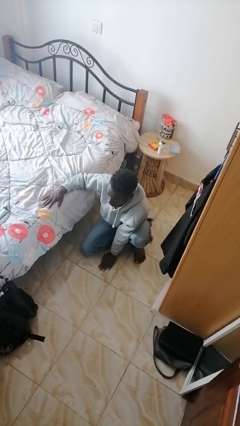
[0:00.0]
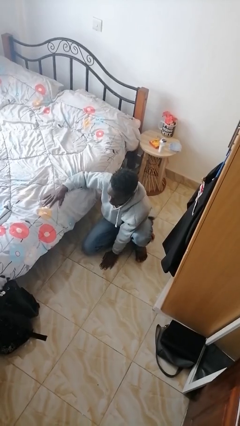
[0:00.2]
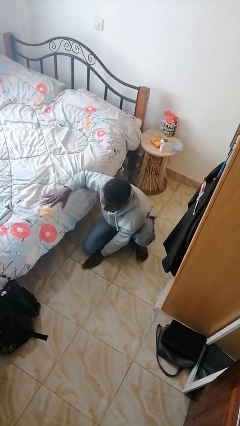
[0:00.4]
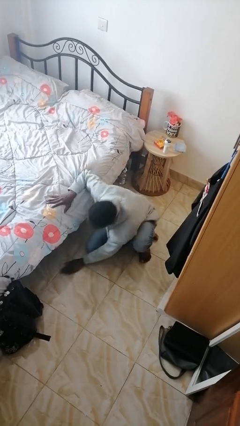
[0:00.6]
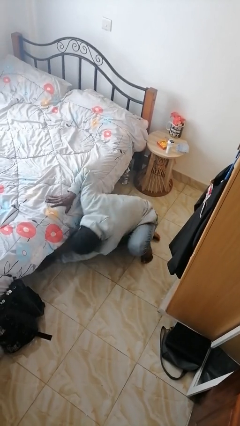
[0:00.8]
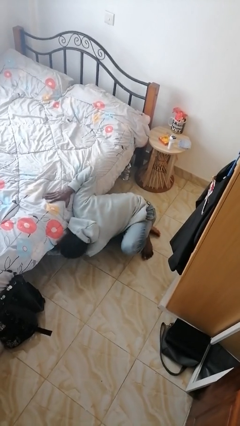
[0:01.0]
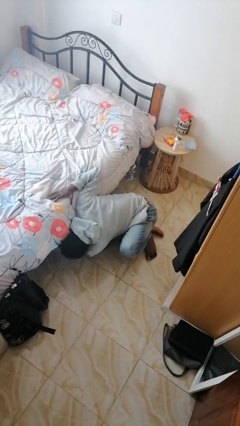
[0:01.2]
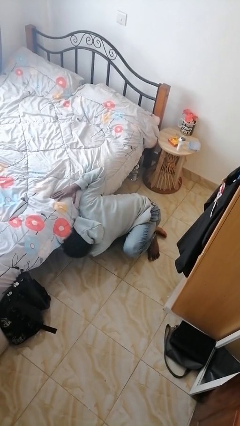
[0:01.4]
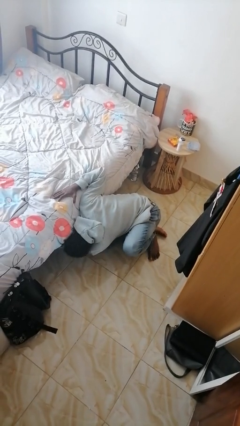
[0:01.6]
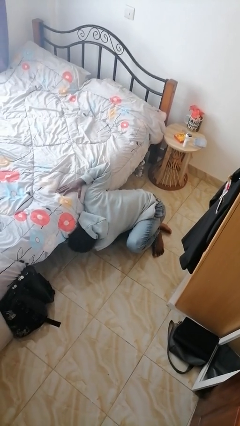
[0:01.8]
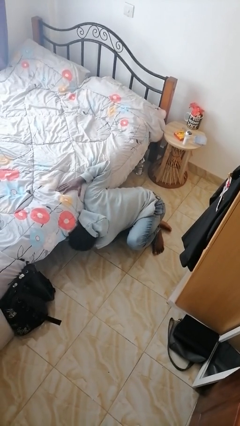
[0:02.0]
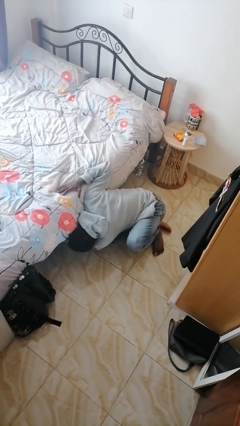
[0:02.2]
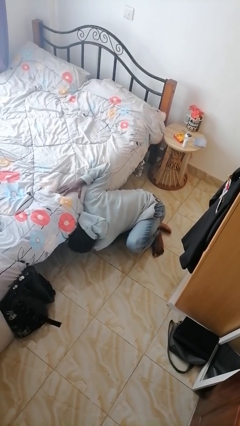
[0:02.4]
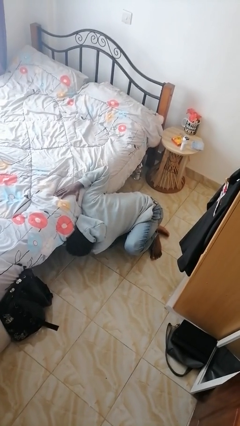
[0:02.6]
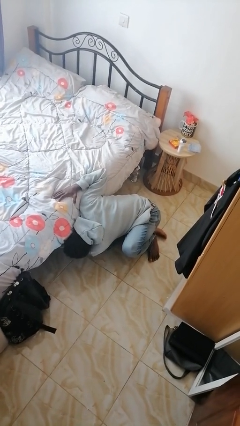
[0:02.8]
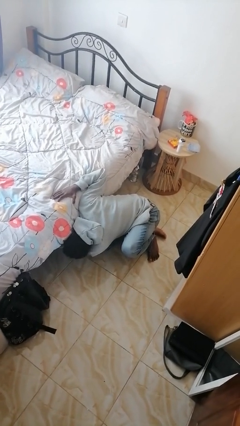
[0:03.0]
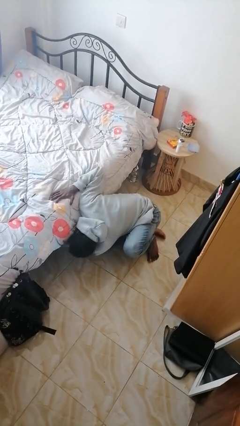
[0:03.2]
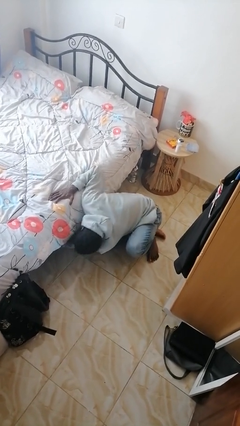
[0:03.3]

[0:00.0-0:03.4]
person searches under bed

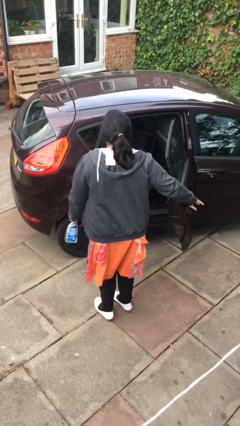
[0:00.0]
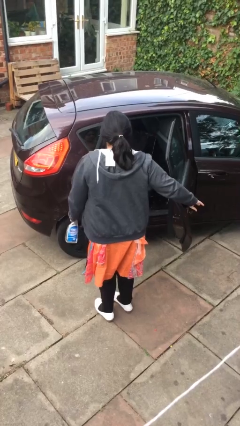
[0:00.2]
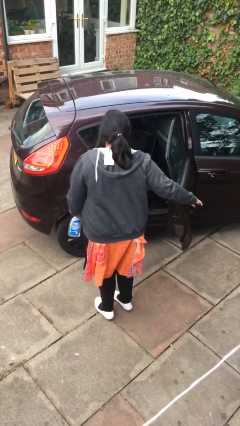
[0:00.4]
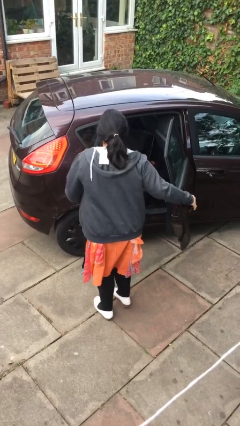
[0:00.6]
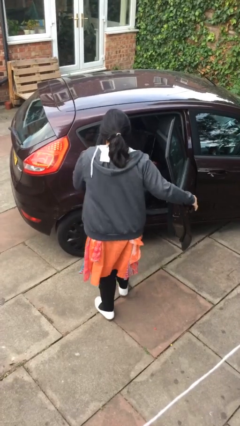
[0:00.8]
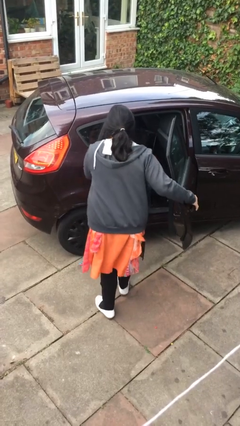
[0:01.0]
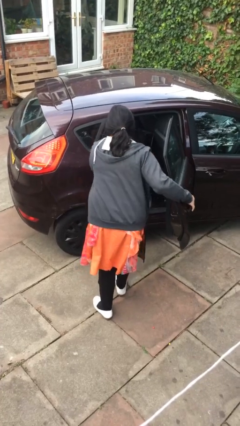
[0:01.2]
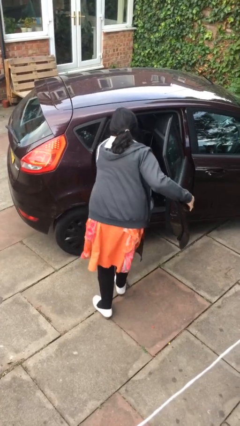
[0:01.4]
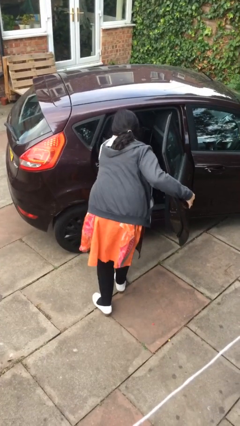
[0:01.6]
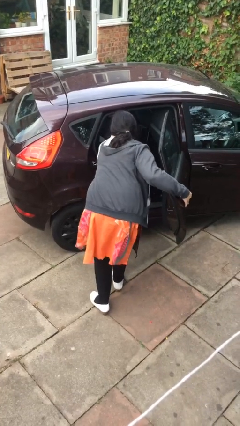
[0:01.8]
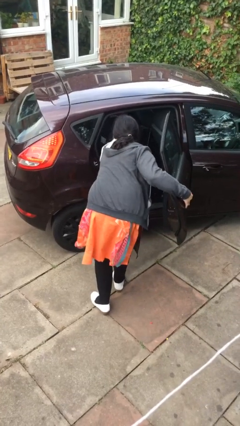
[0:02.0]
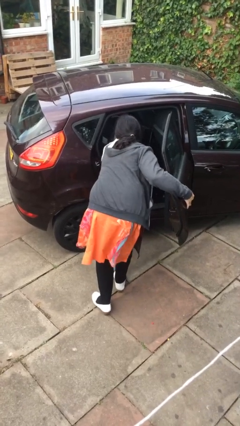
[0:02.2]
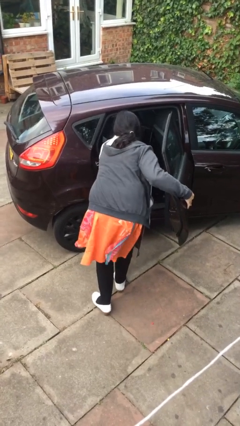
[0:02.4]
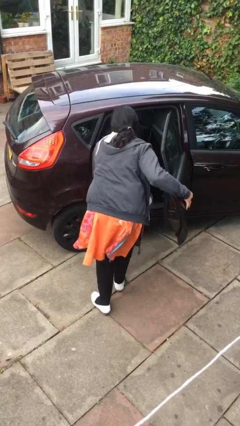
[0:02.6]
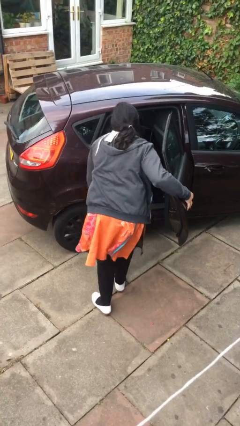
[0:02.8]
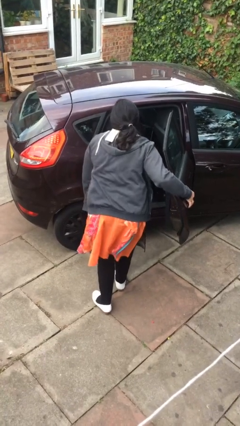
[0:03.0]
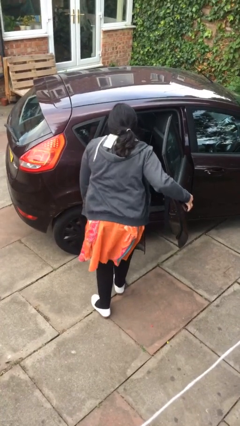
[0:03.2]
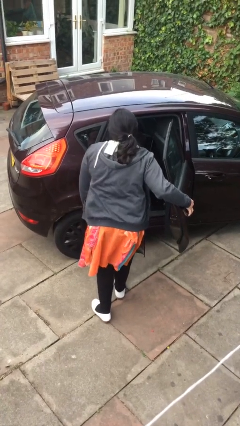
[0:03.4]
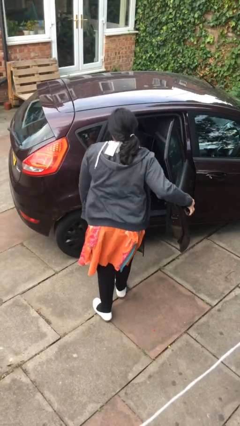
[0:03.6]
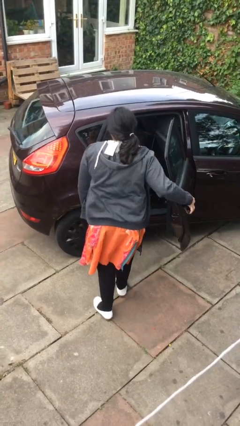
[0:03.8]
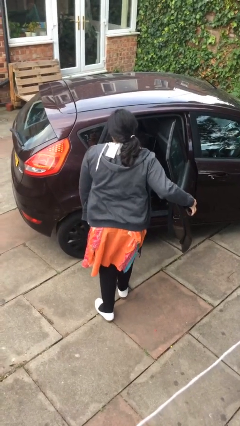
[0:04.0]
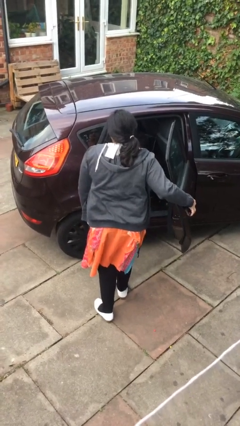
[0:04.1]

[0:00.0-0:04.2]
person loads car

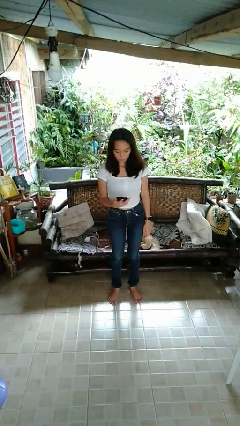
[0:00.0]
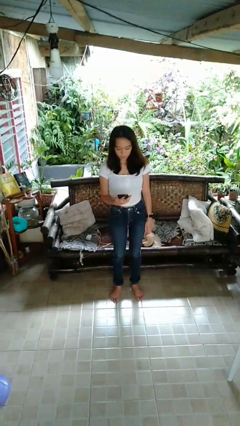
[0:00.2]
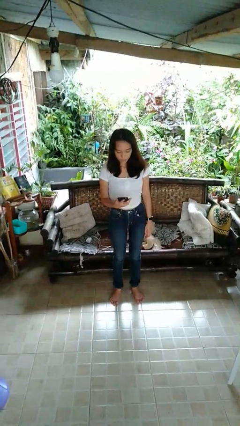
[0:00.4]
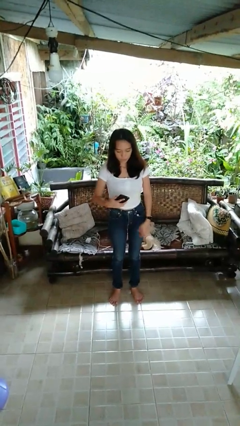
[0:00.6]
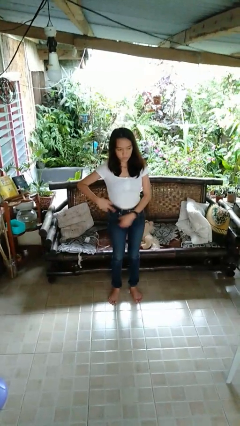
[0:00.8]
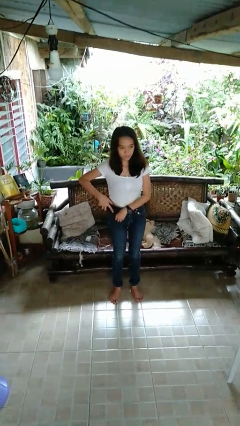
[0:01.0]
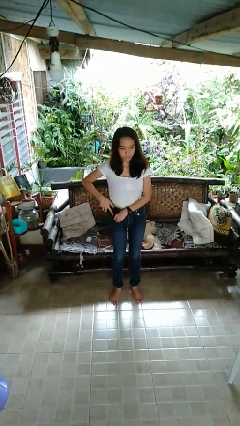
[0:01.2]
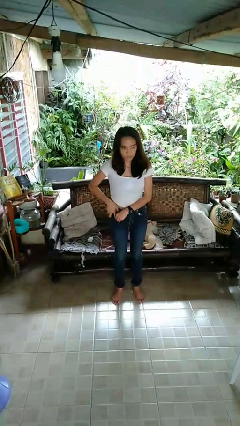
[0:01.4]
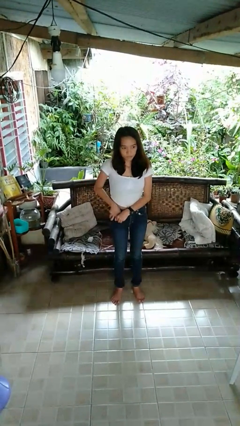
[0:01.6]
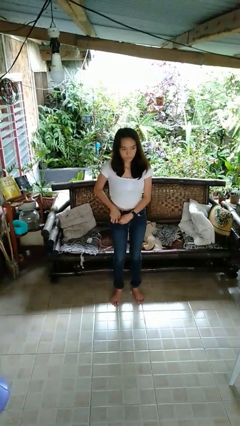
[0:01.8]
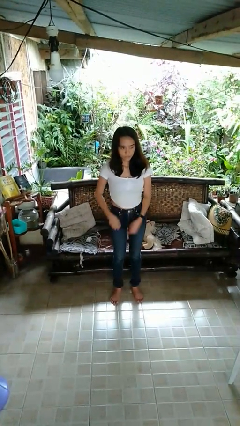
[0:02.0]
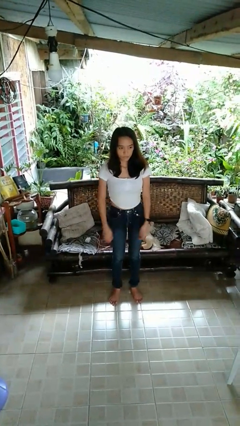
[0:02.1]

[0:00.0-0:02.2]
person puts phone into pocket

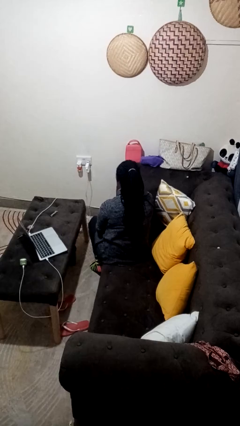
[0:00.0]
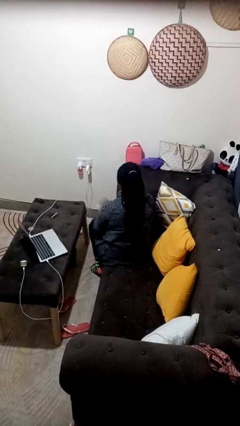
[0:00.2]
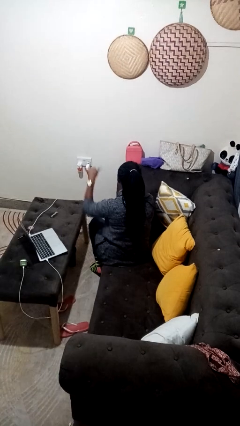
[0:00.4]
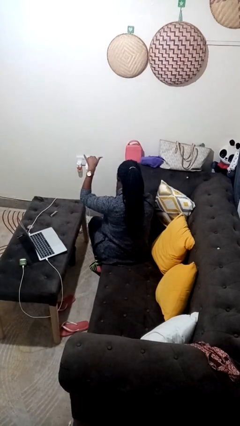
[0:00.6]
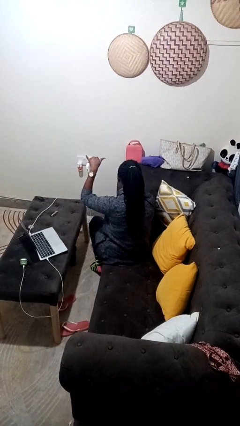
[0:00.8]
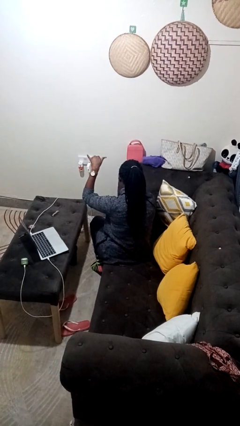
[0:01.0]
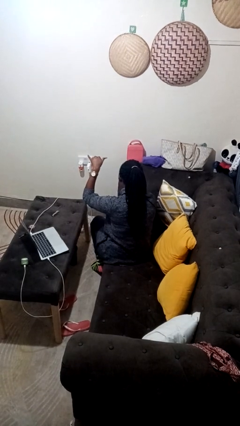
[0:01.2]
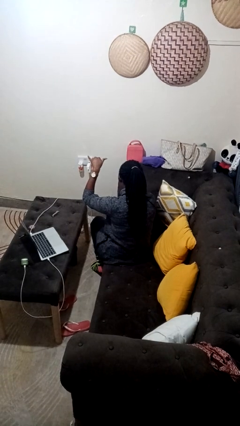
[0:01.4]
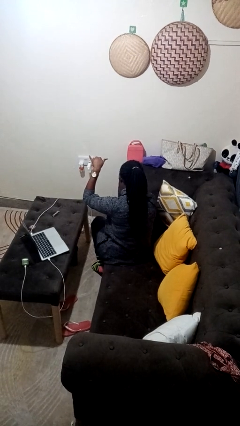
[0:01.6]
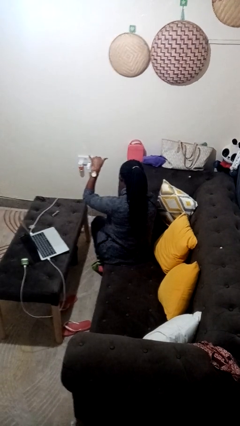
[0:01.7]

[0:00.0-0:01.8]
person gestures hang loose

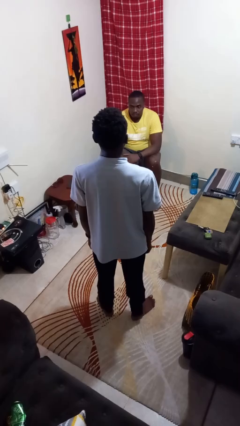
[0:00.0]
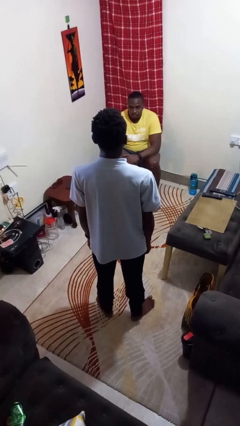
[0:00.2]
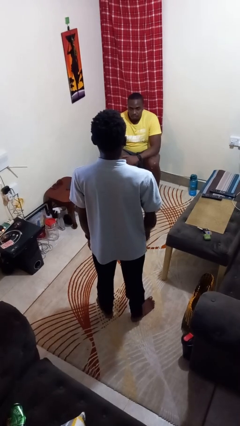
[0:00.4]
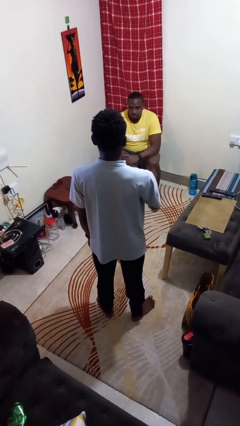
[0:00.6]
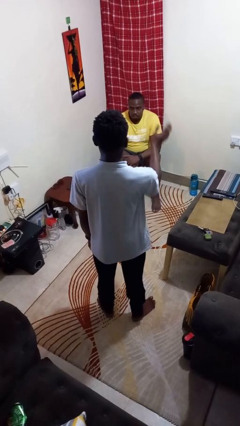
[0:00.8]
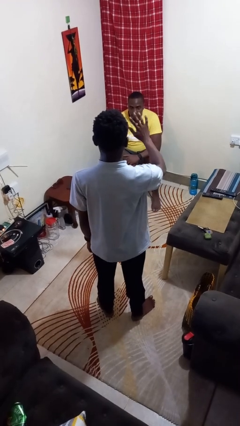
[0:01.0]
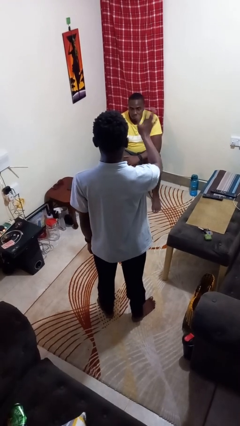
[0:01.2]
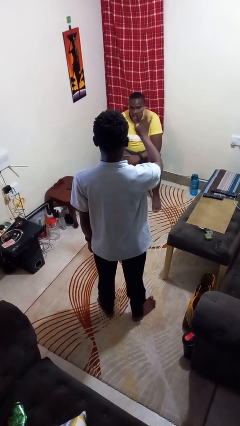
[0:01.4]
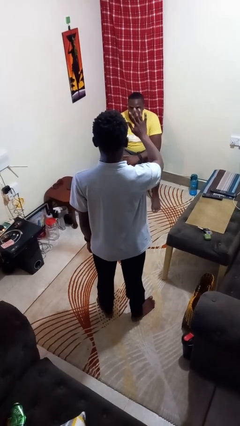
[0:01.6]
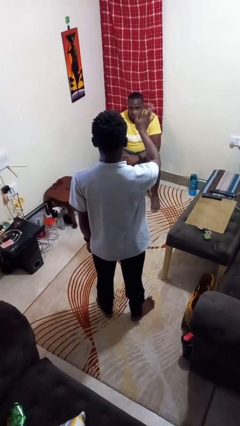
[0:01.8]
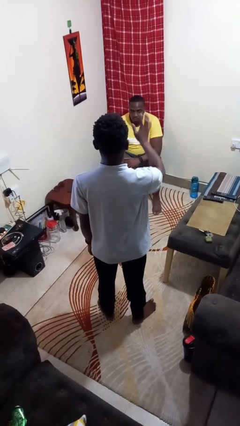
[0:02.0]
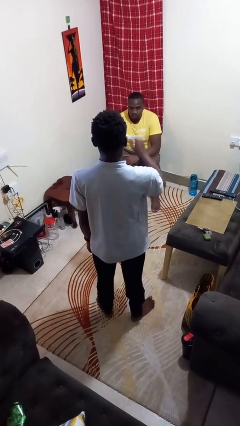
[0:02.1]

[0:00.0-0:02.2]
person waves at person

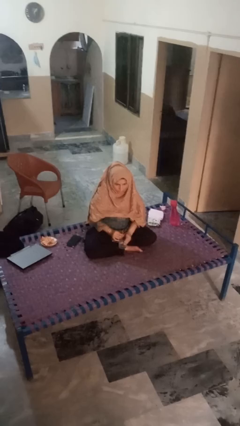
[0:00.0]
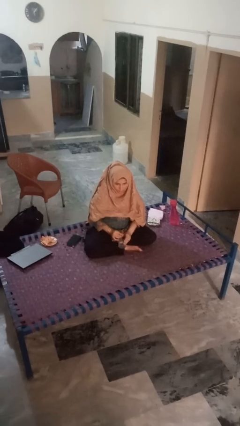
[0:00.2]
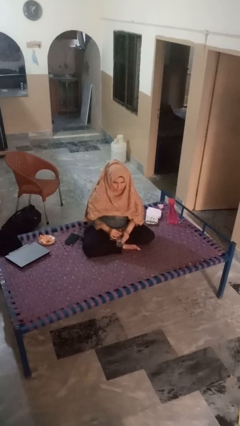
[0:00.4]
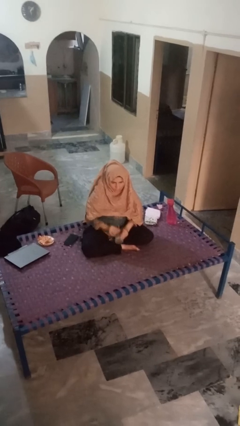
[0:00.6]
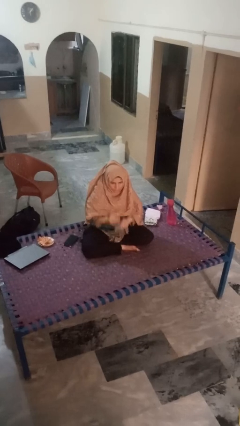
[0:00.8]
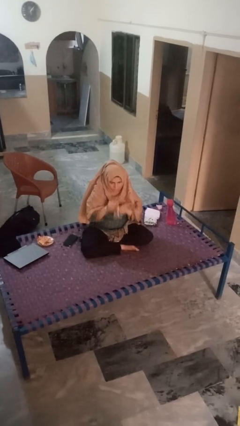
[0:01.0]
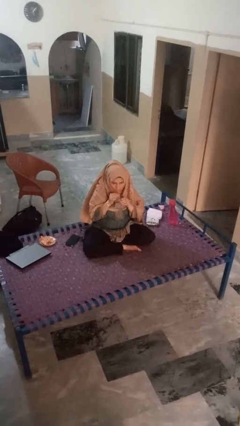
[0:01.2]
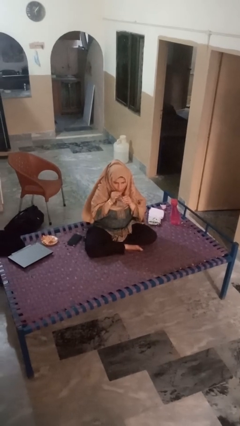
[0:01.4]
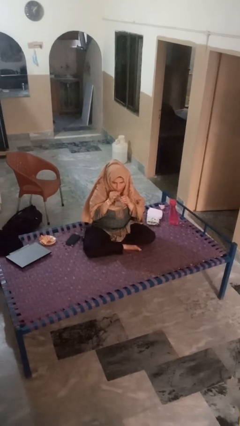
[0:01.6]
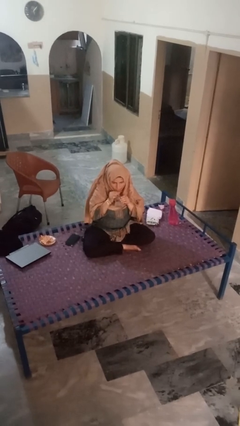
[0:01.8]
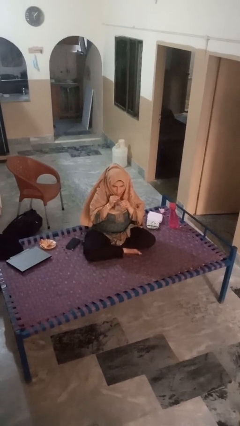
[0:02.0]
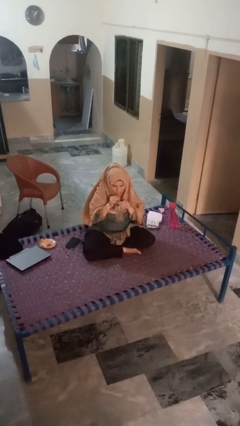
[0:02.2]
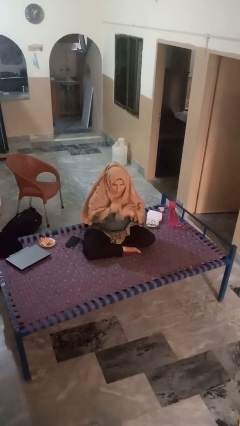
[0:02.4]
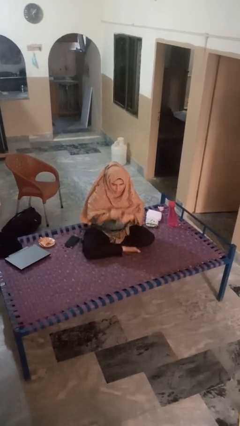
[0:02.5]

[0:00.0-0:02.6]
person drinks from straw

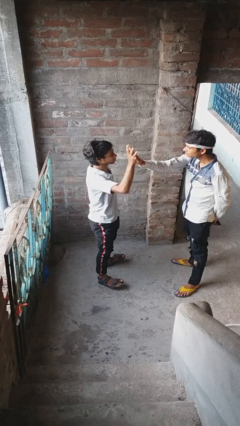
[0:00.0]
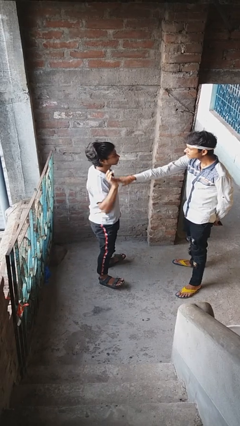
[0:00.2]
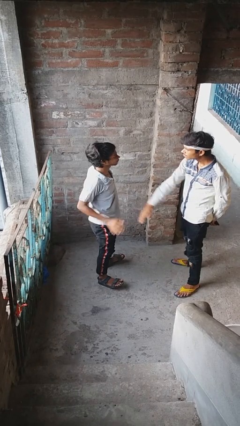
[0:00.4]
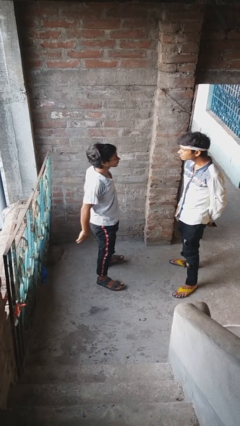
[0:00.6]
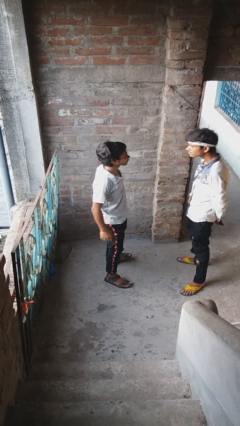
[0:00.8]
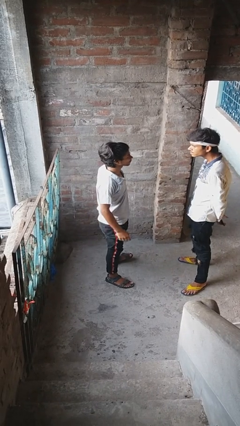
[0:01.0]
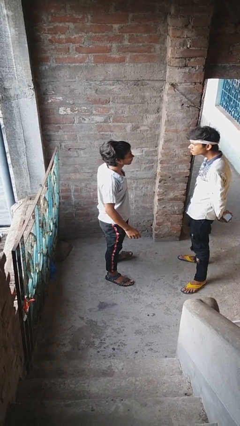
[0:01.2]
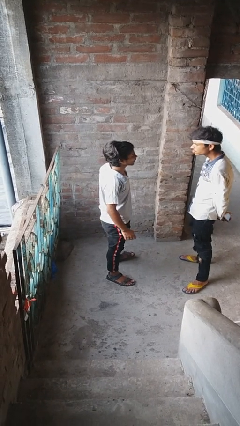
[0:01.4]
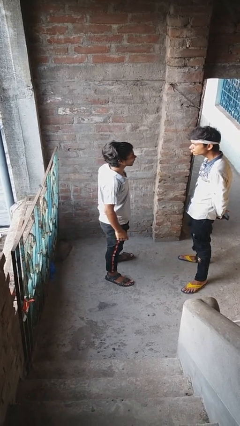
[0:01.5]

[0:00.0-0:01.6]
person highfives hand
